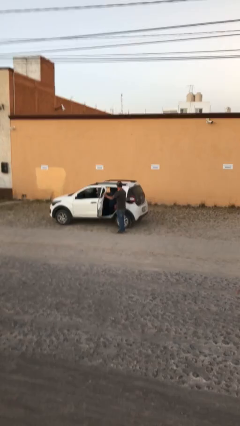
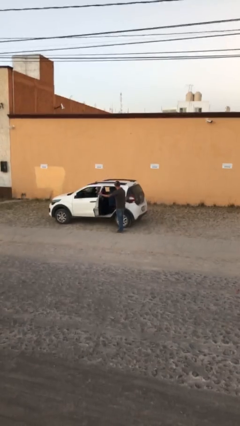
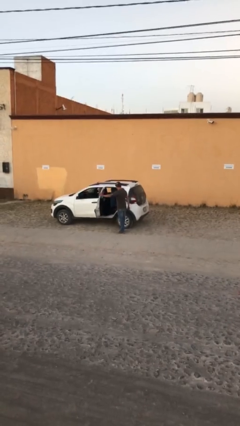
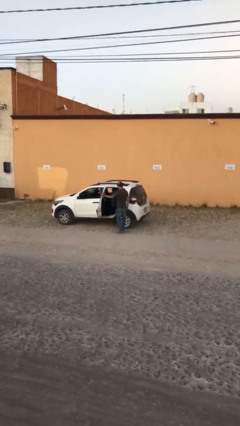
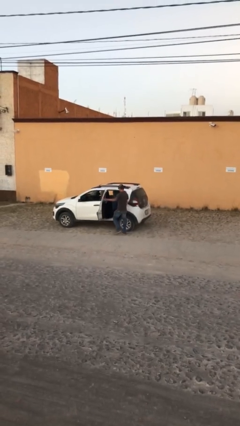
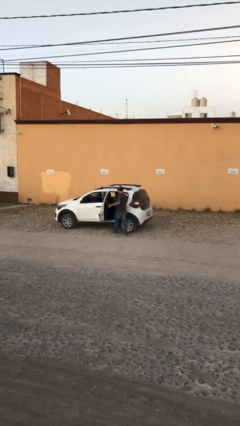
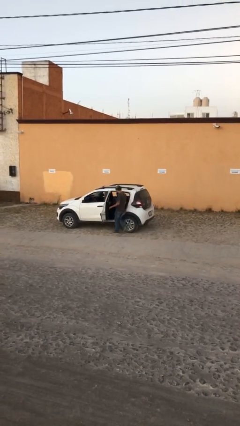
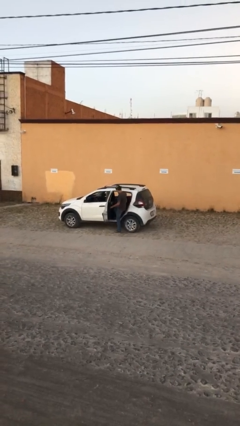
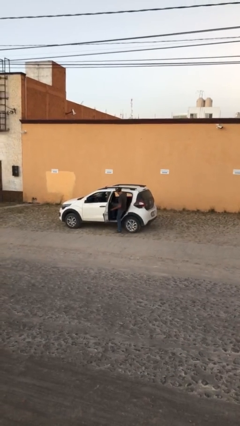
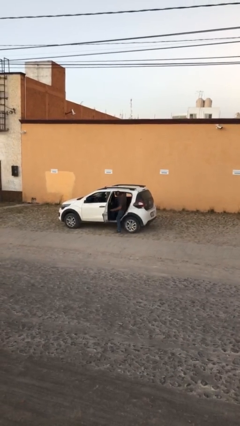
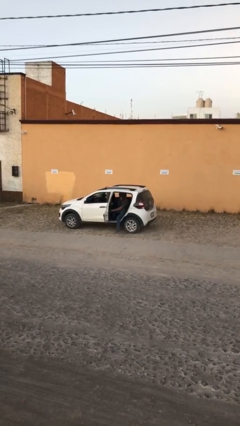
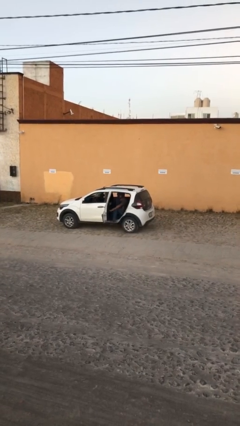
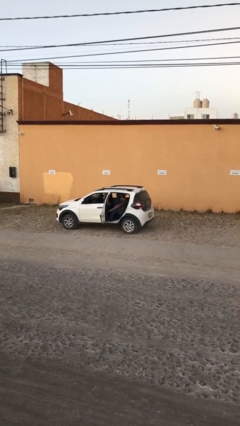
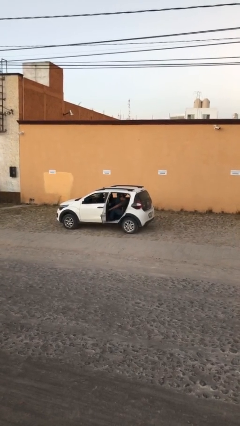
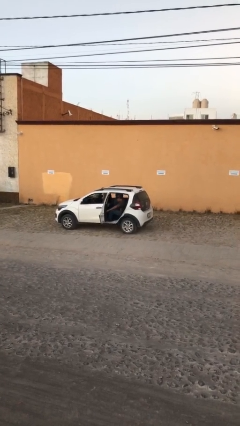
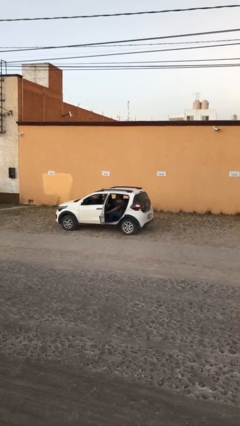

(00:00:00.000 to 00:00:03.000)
person enters car

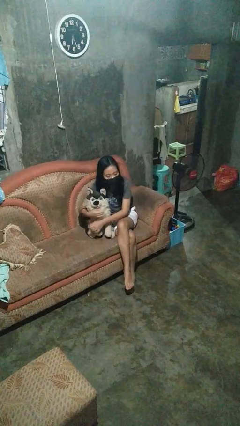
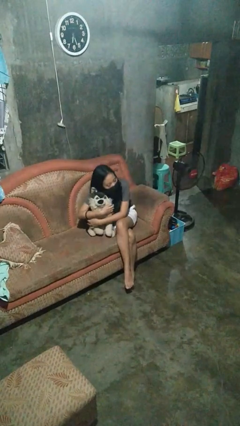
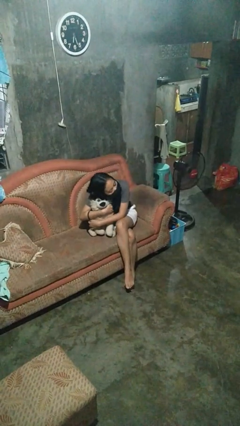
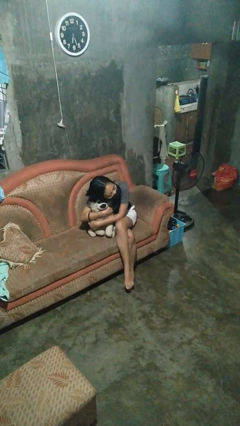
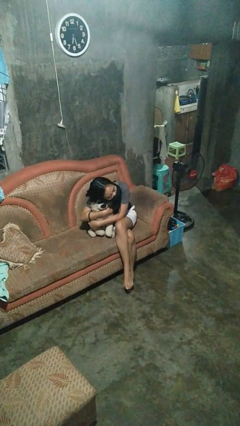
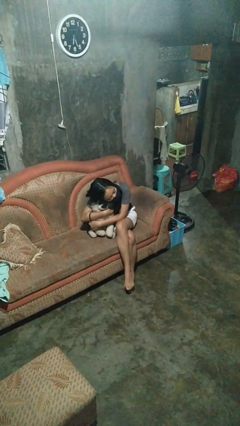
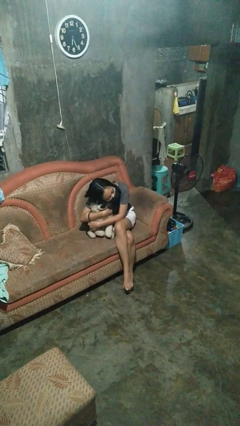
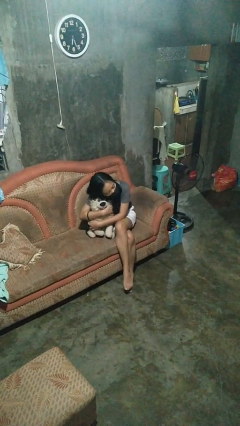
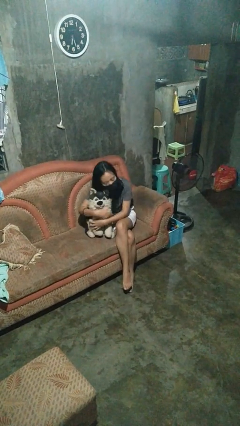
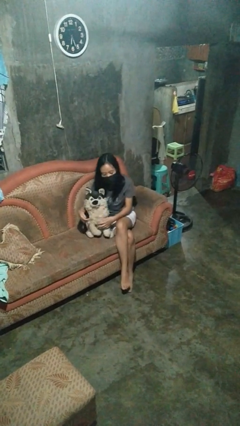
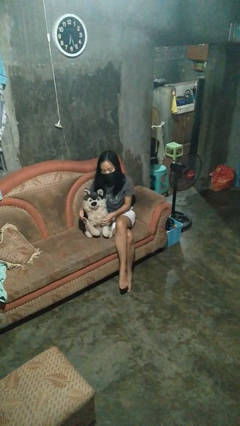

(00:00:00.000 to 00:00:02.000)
person hugs stuffed animal

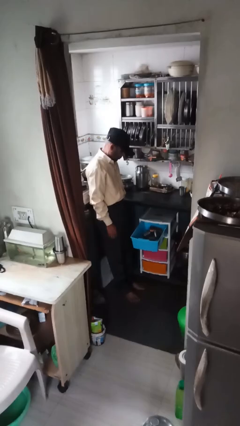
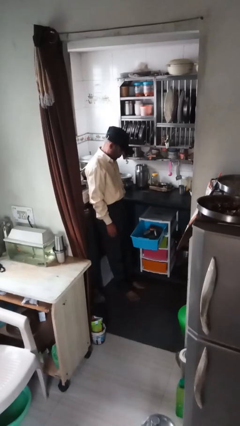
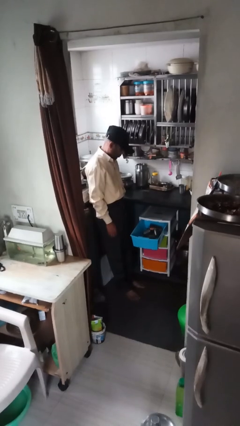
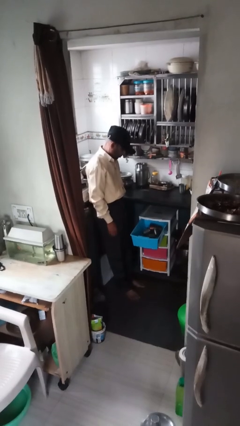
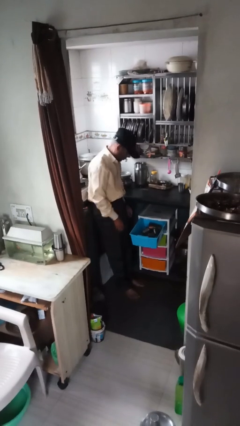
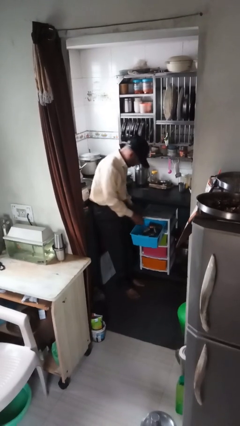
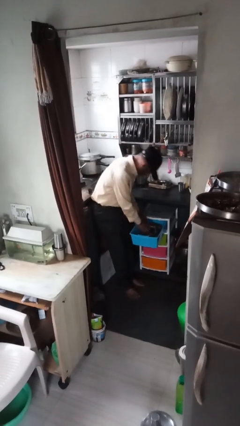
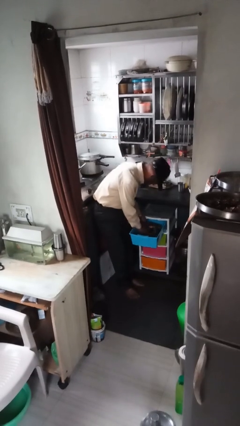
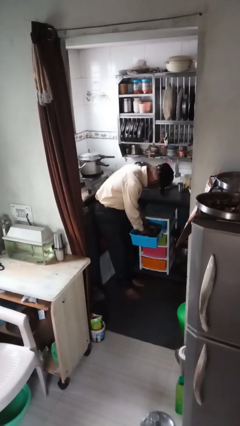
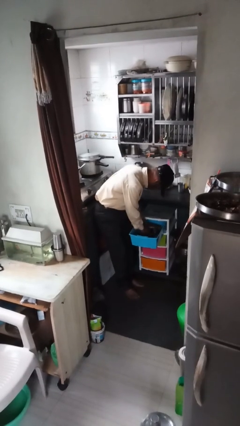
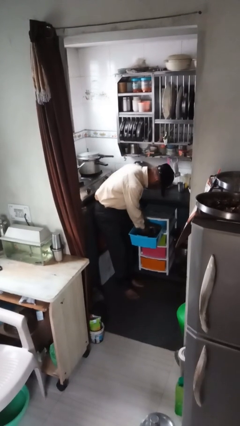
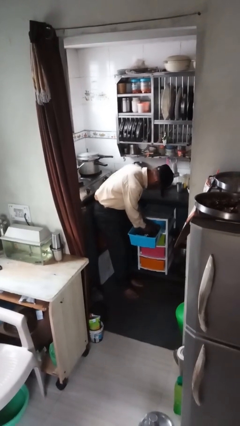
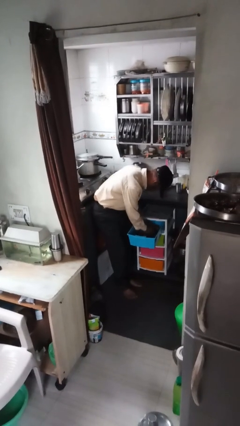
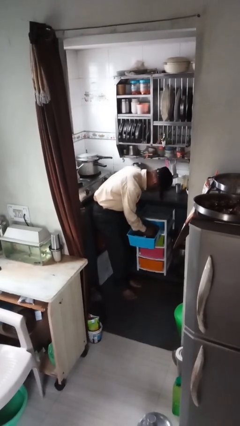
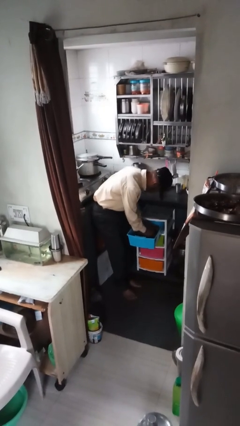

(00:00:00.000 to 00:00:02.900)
person searches in kitchen drawer

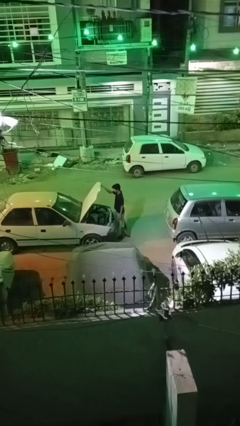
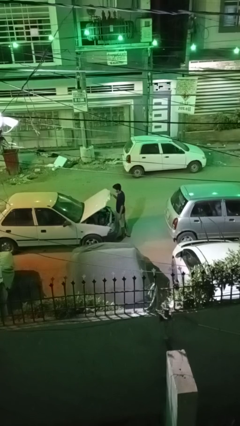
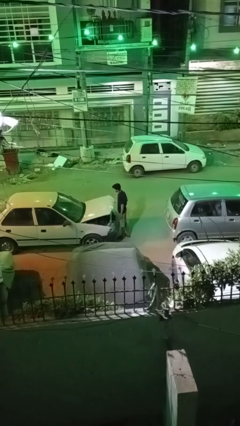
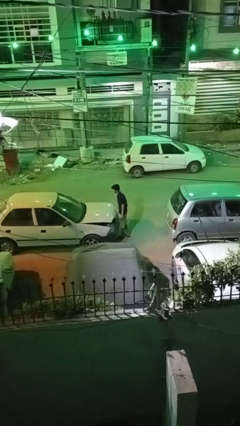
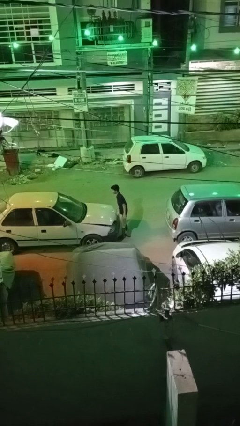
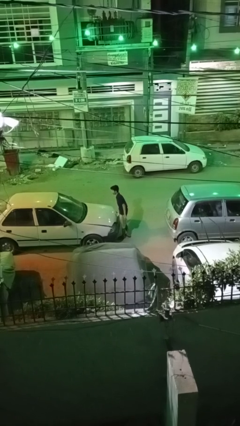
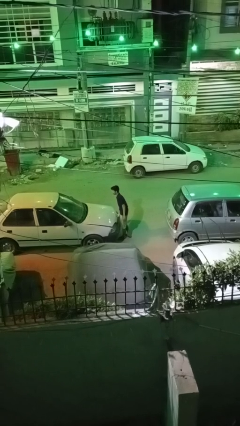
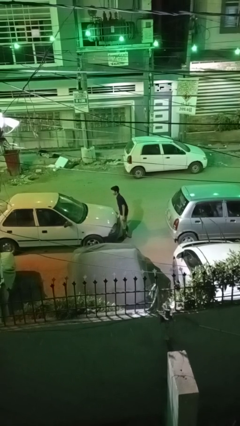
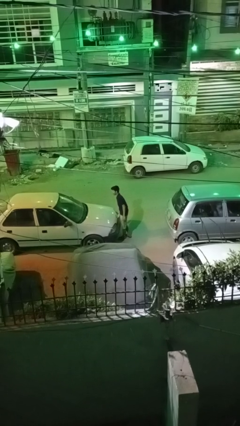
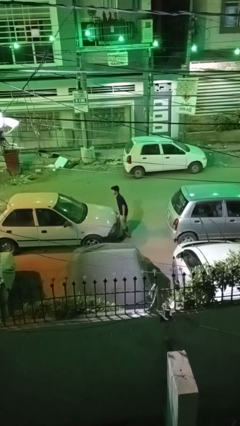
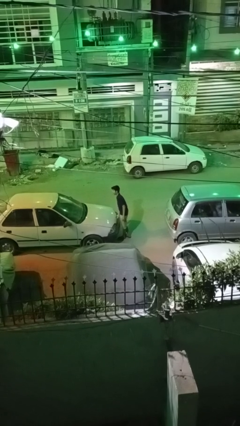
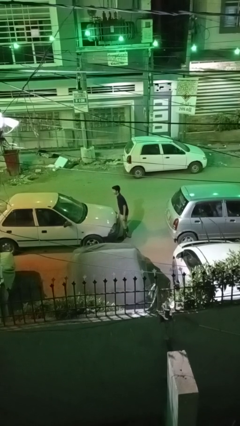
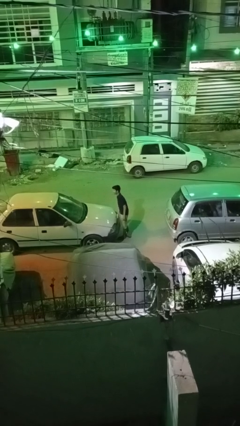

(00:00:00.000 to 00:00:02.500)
person closes car hood

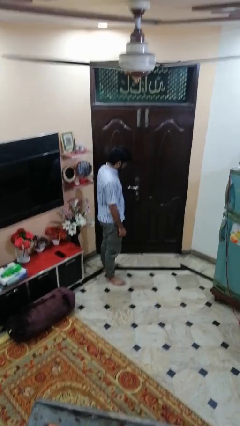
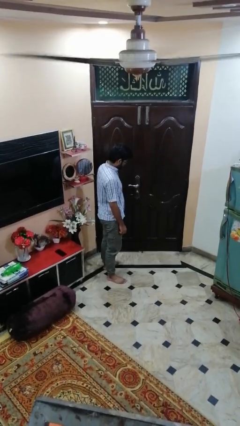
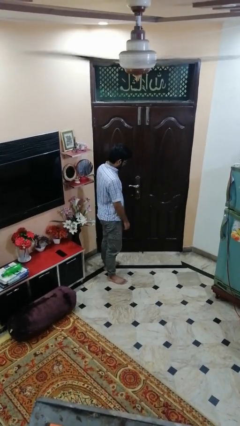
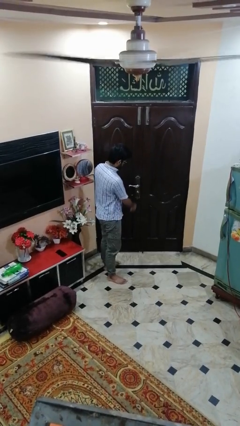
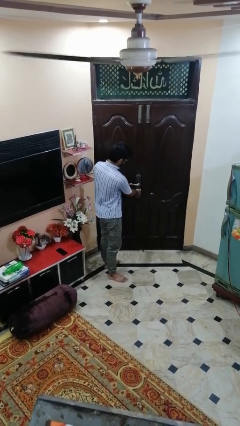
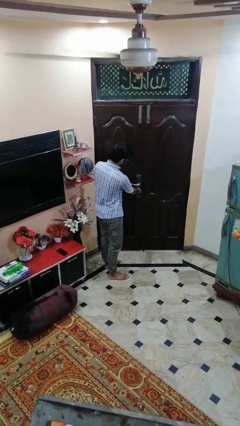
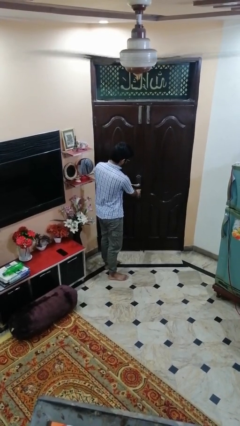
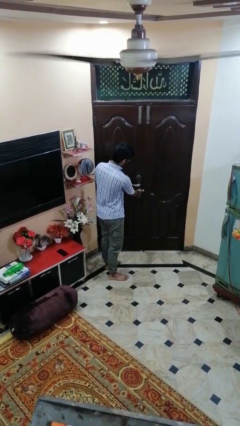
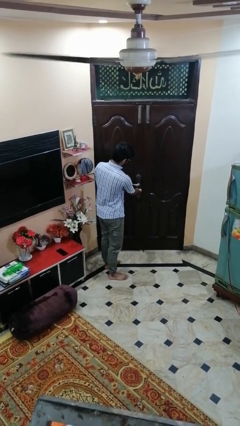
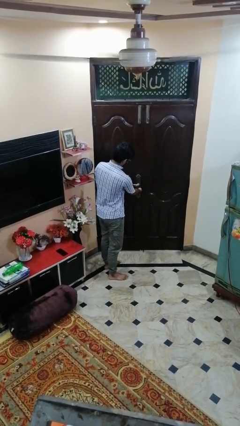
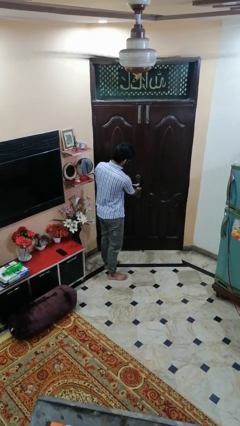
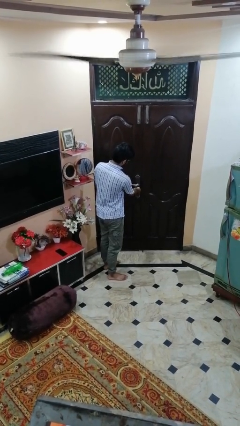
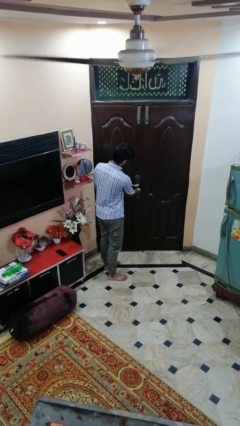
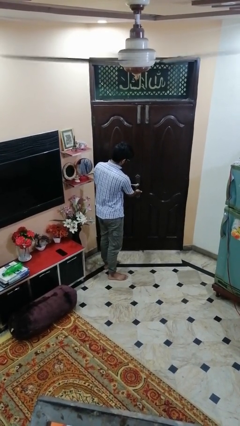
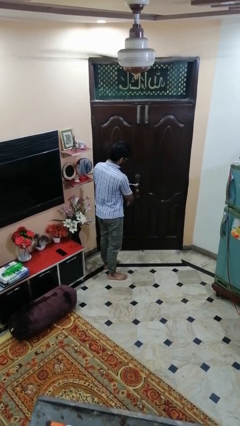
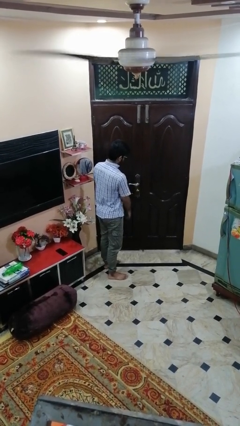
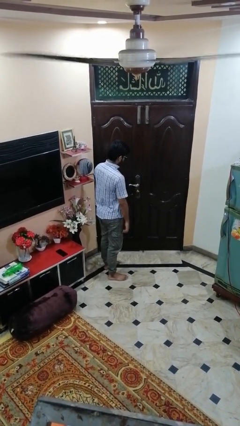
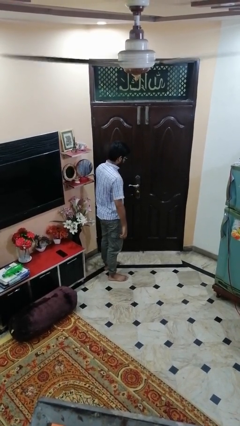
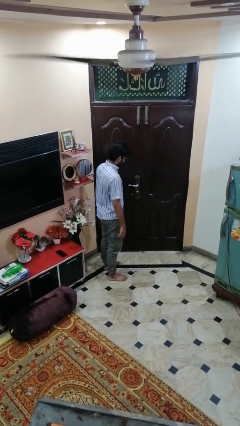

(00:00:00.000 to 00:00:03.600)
person unlocks door with keys

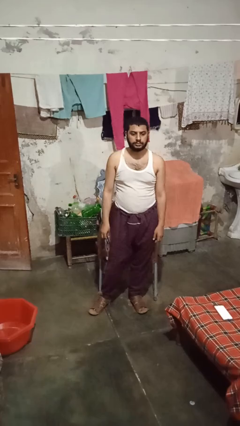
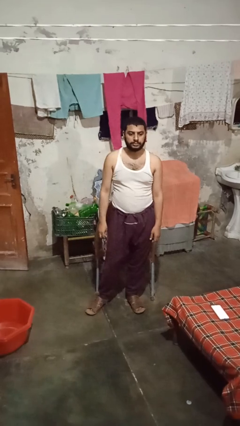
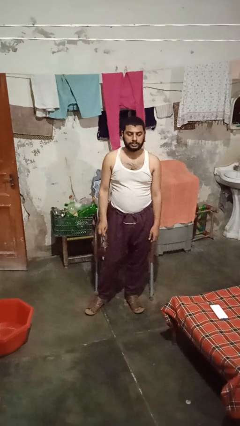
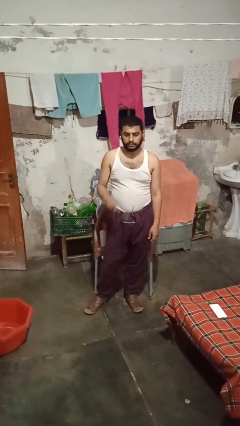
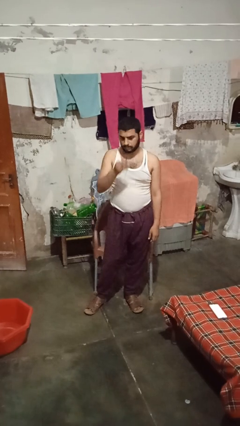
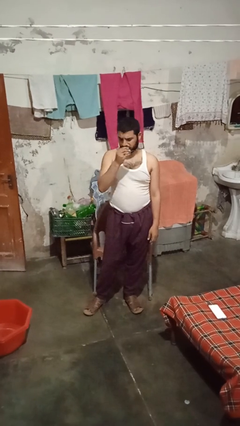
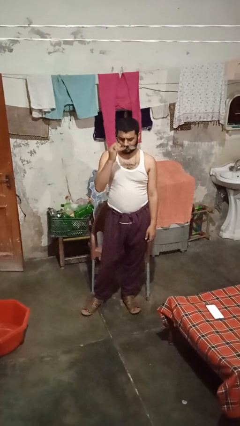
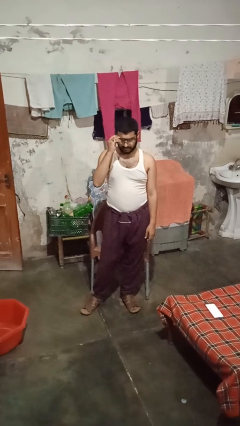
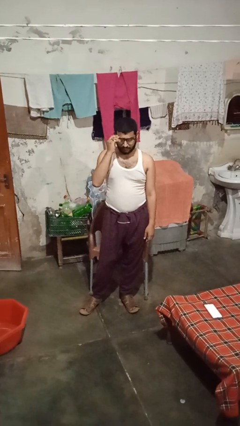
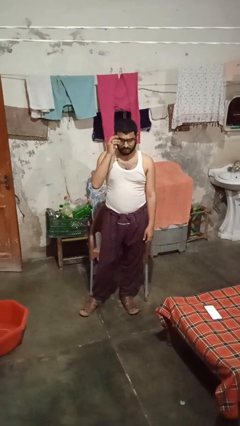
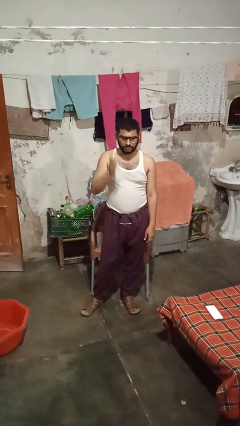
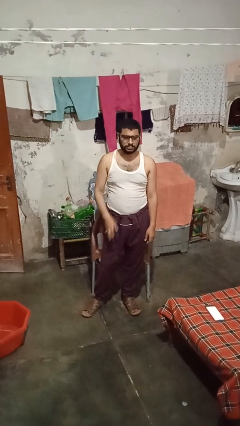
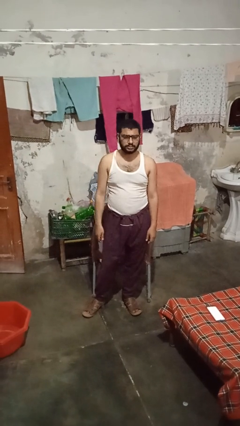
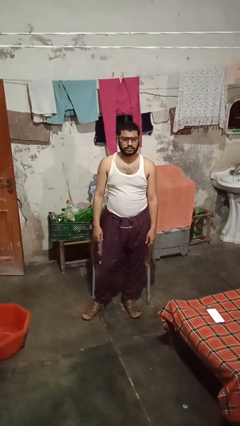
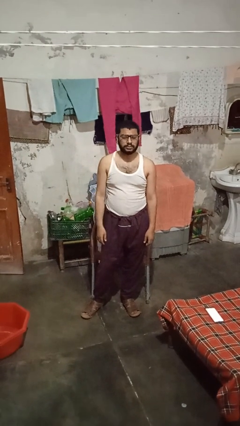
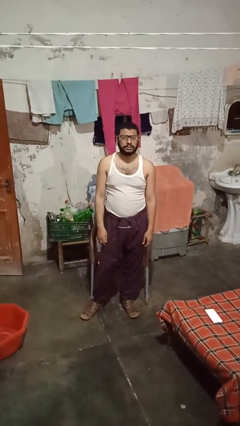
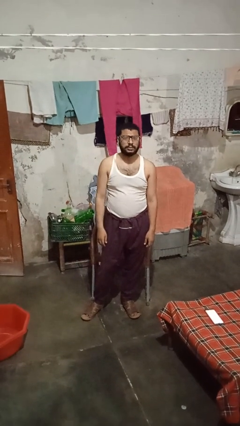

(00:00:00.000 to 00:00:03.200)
person puts on glasses

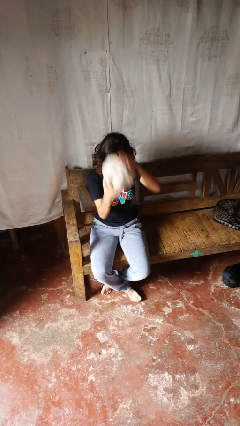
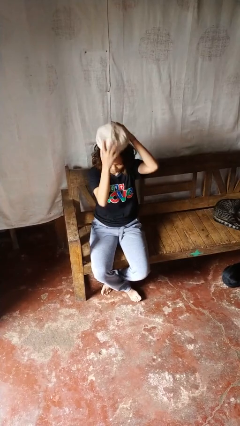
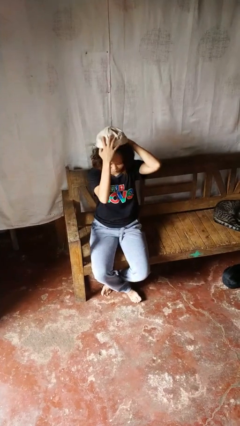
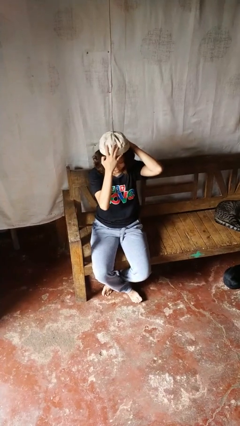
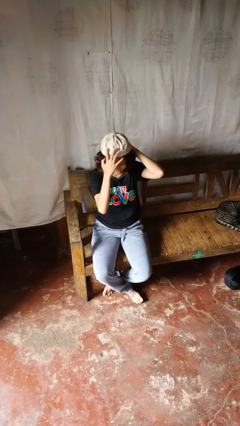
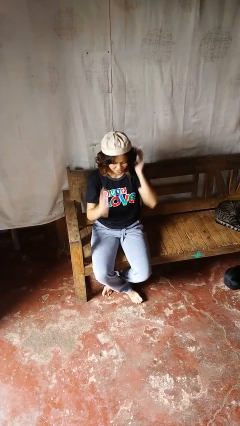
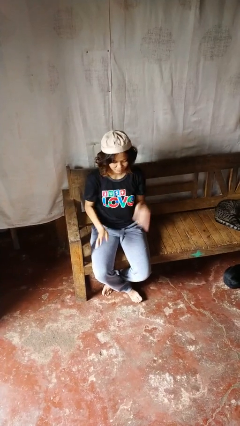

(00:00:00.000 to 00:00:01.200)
person puts on hat
